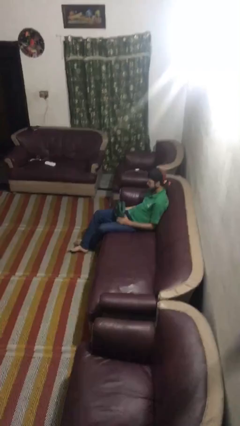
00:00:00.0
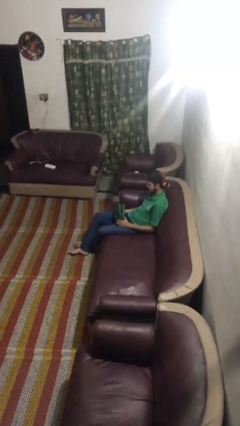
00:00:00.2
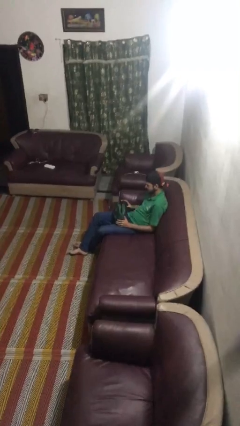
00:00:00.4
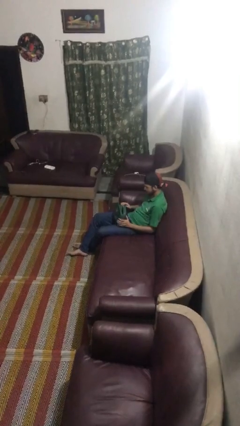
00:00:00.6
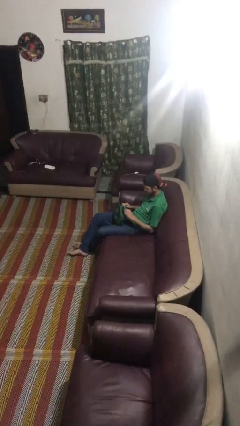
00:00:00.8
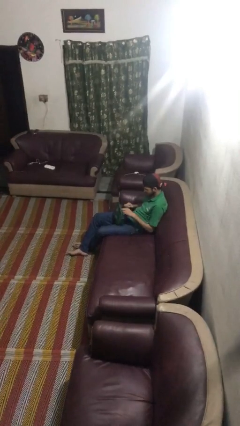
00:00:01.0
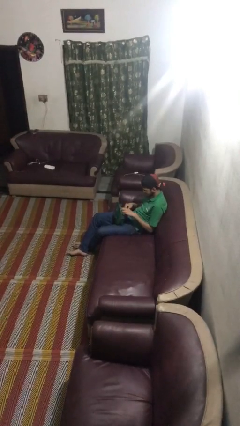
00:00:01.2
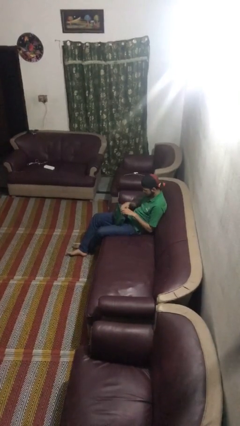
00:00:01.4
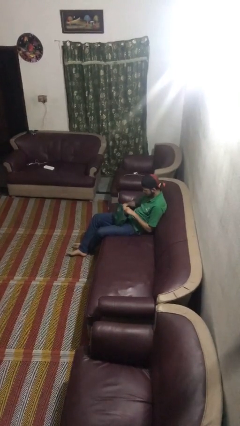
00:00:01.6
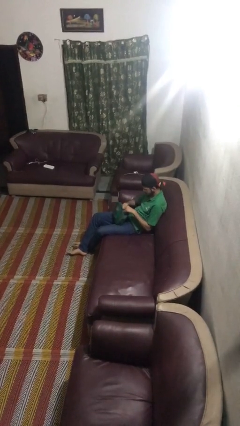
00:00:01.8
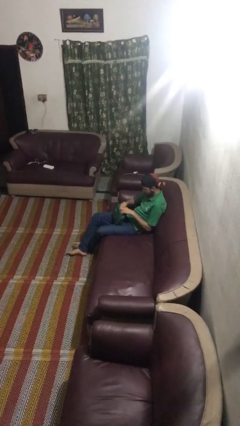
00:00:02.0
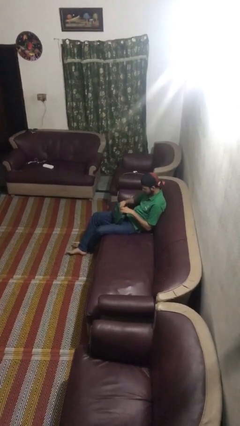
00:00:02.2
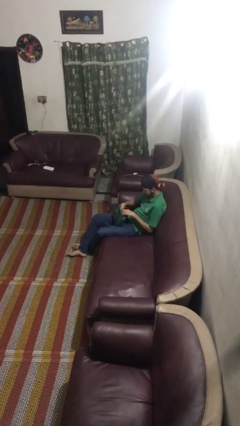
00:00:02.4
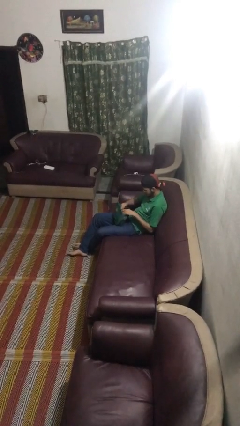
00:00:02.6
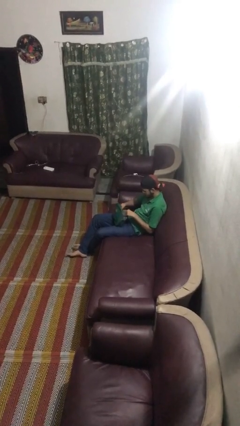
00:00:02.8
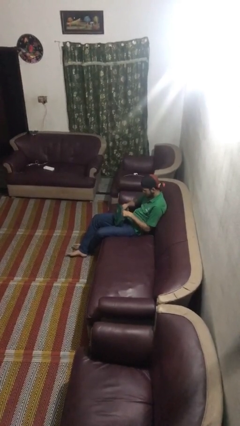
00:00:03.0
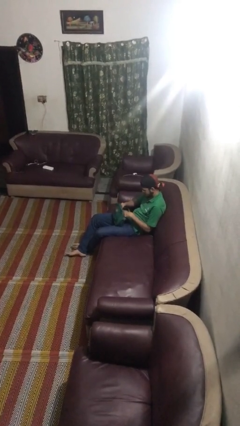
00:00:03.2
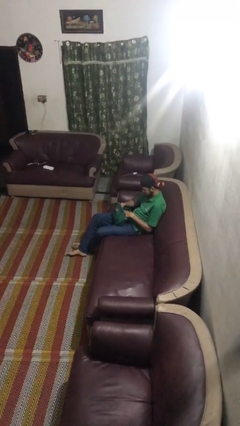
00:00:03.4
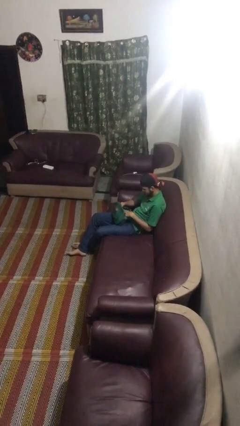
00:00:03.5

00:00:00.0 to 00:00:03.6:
person searches in purse

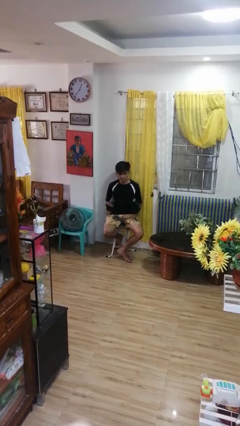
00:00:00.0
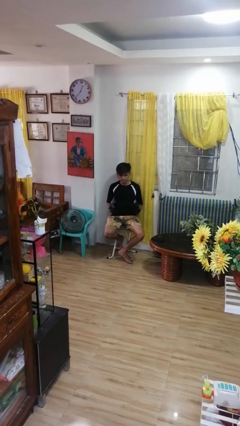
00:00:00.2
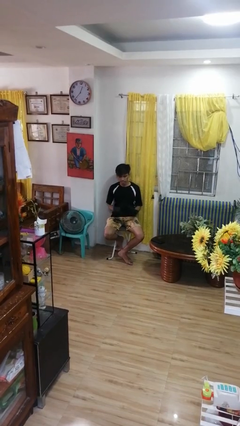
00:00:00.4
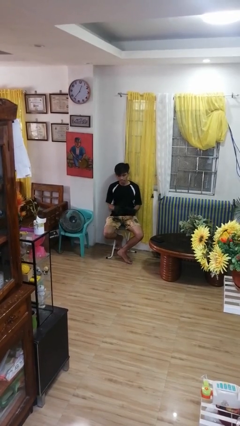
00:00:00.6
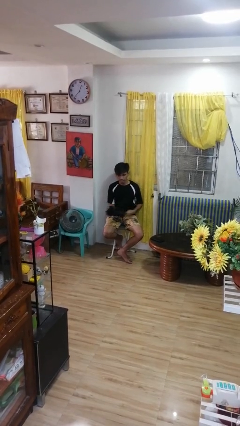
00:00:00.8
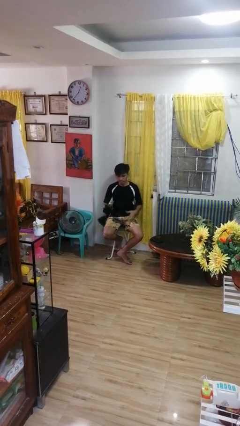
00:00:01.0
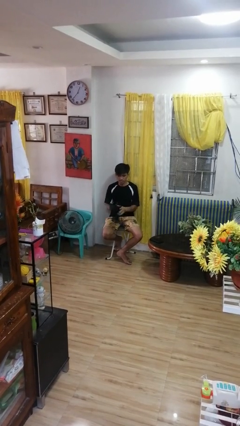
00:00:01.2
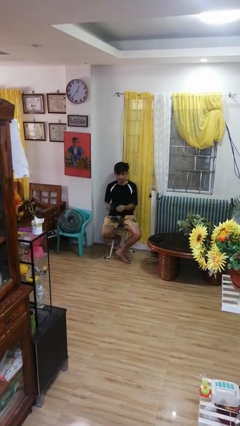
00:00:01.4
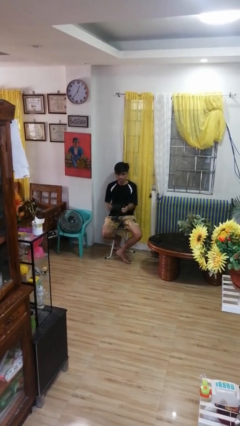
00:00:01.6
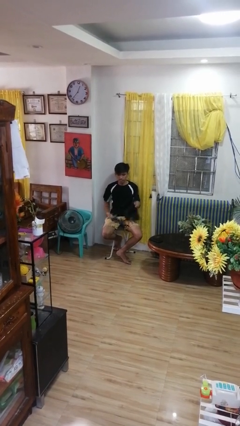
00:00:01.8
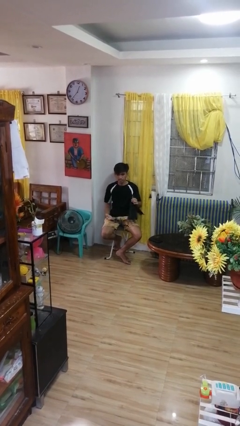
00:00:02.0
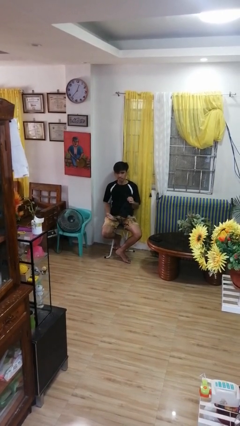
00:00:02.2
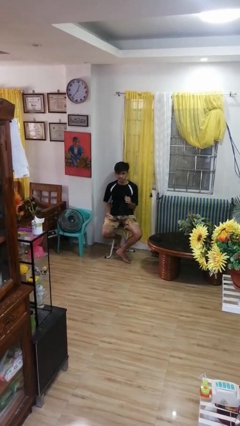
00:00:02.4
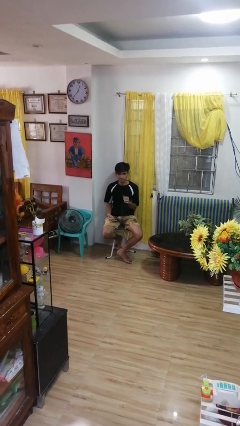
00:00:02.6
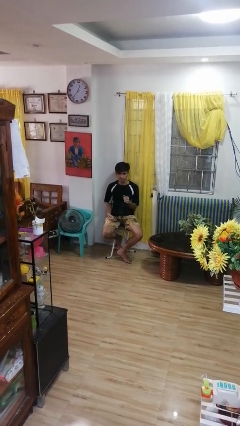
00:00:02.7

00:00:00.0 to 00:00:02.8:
person takes off gloves

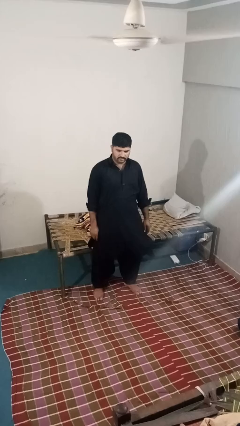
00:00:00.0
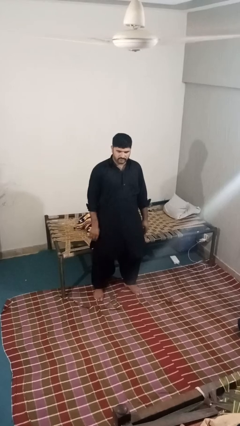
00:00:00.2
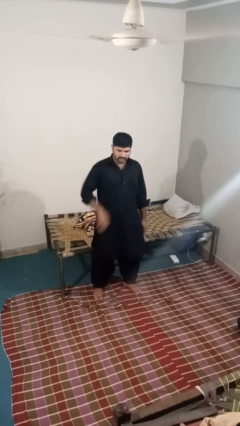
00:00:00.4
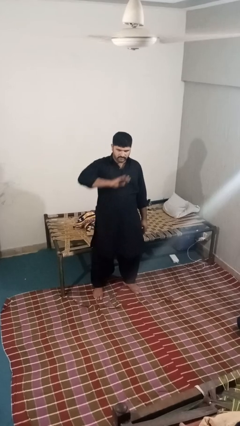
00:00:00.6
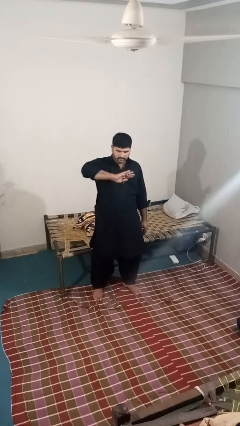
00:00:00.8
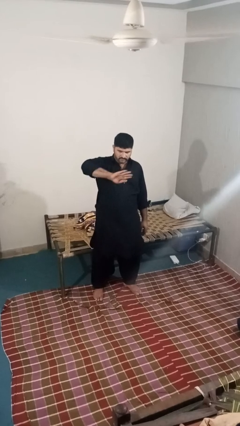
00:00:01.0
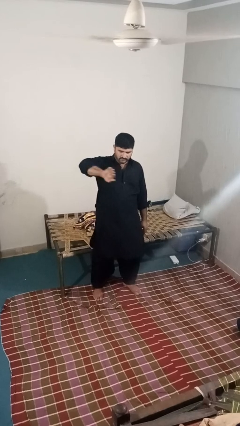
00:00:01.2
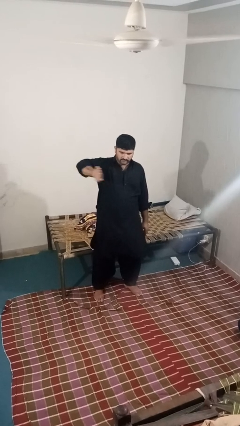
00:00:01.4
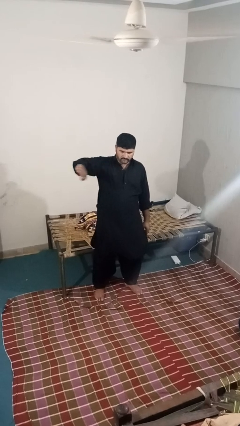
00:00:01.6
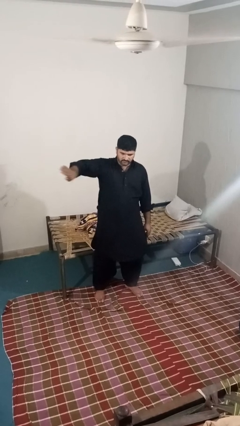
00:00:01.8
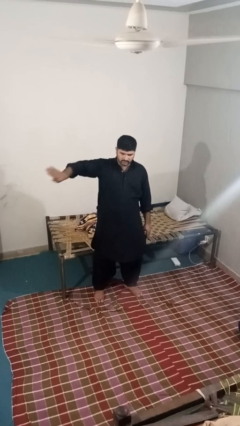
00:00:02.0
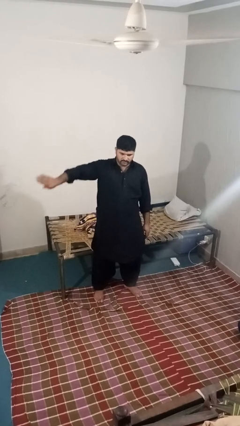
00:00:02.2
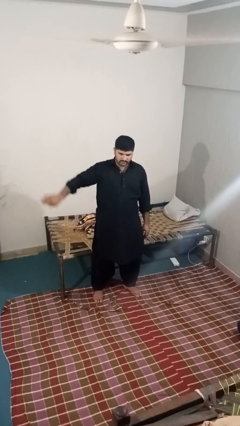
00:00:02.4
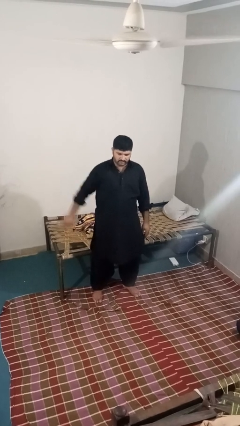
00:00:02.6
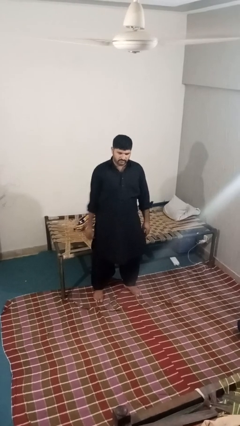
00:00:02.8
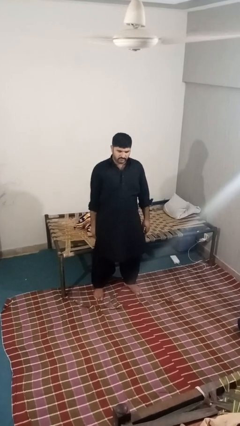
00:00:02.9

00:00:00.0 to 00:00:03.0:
person gestures swipe right

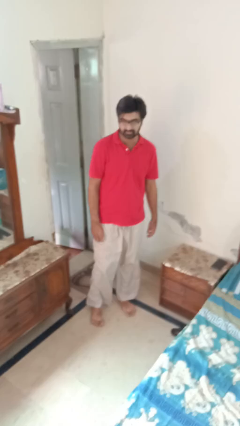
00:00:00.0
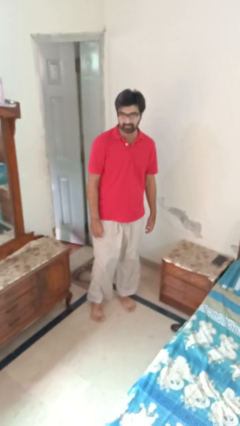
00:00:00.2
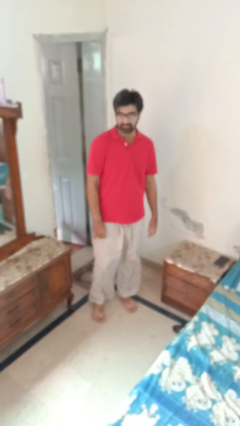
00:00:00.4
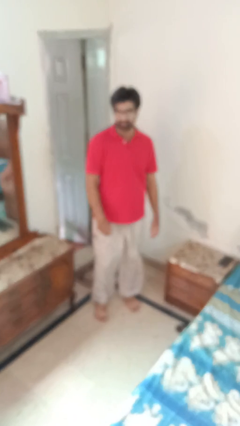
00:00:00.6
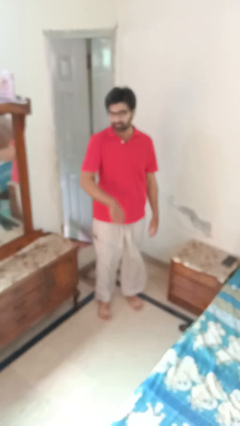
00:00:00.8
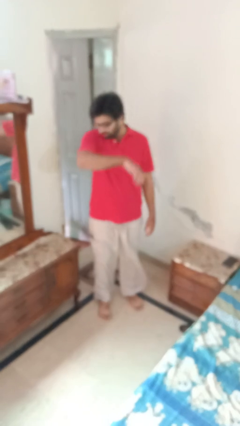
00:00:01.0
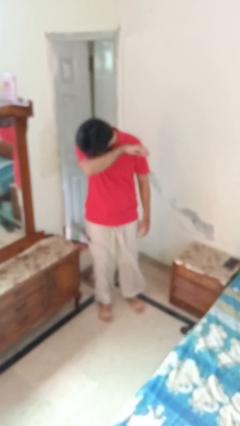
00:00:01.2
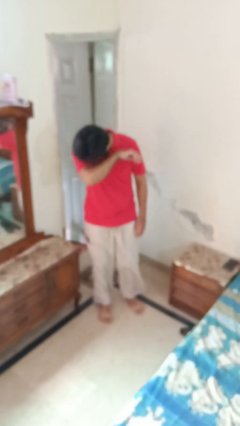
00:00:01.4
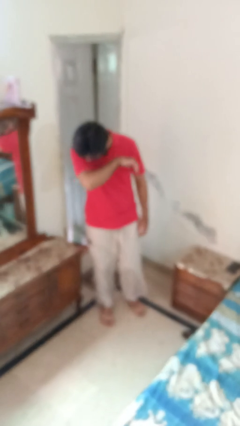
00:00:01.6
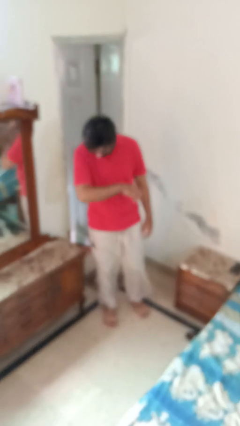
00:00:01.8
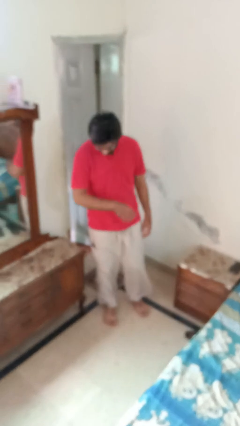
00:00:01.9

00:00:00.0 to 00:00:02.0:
person sneezes into arm

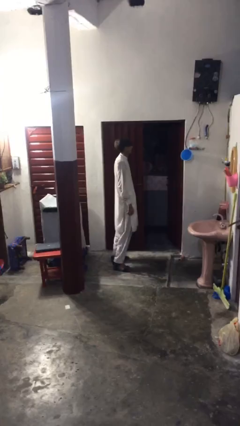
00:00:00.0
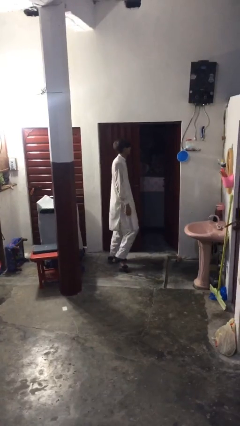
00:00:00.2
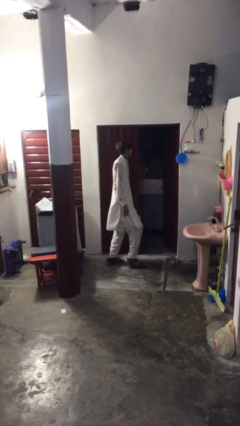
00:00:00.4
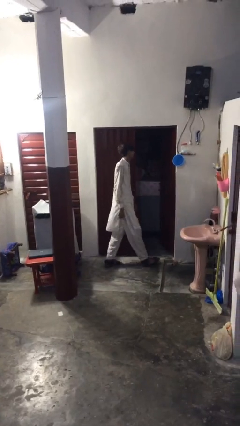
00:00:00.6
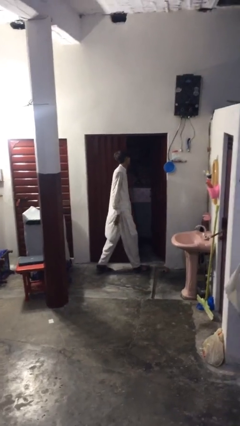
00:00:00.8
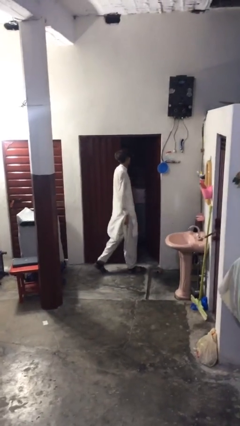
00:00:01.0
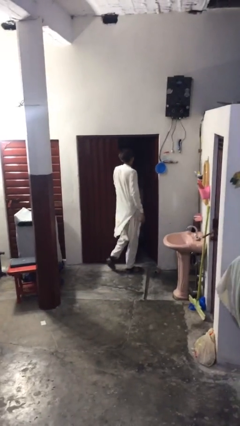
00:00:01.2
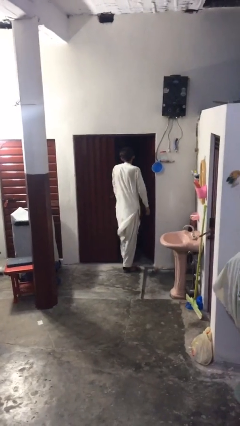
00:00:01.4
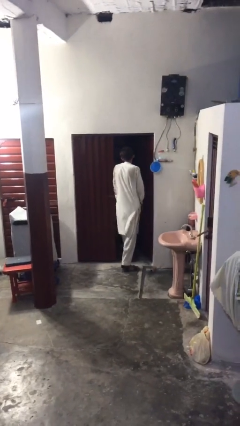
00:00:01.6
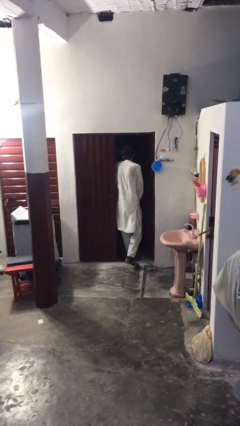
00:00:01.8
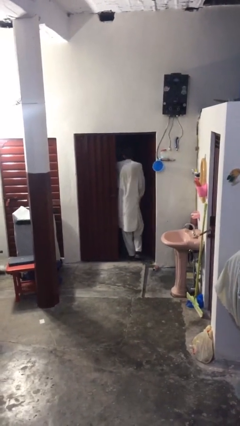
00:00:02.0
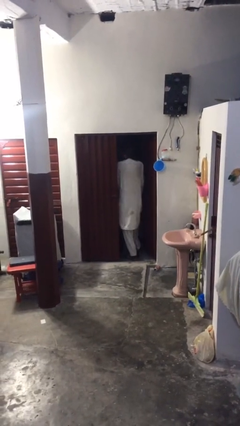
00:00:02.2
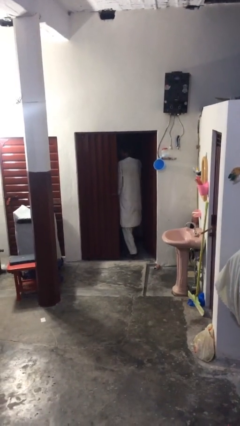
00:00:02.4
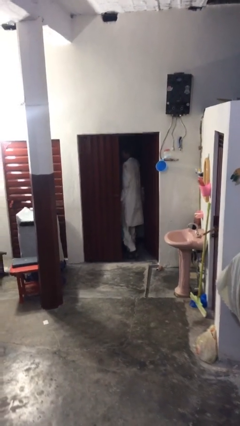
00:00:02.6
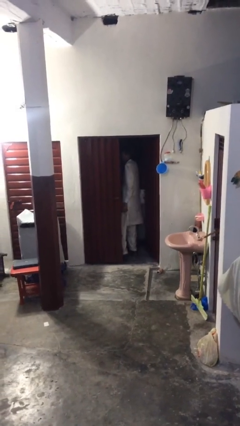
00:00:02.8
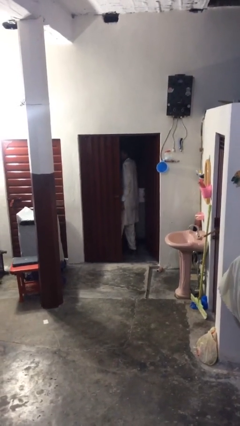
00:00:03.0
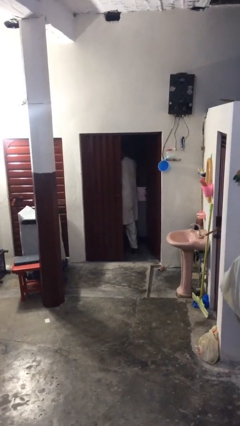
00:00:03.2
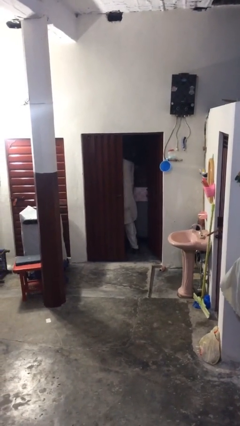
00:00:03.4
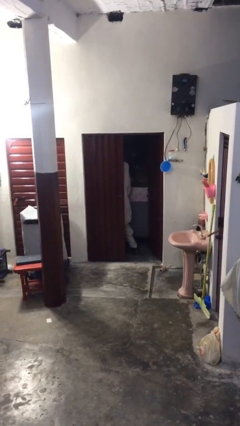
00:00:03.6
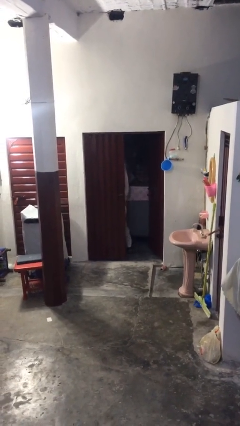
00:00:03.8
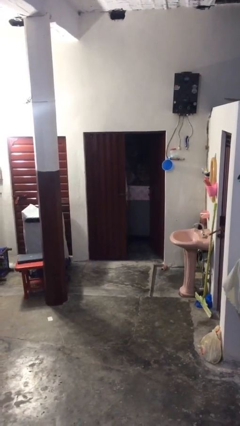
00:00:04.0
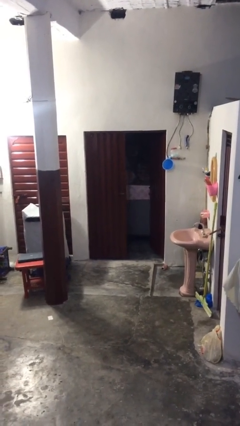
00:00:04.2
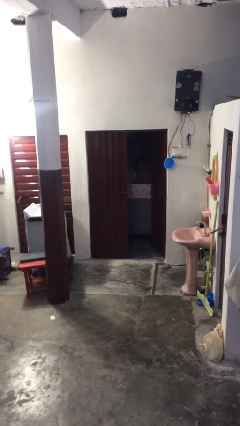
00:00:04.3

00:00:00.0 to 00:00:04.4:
person exits scene through structure

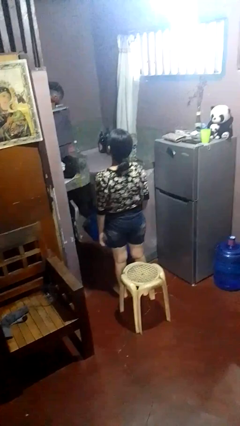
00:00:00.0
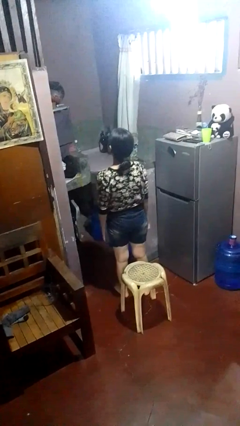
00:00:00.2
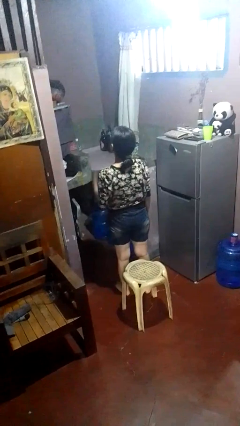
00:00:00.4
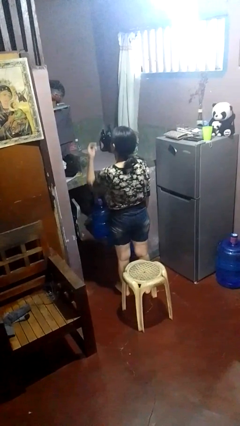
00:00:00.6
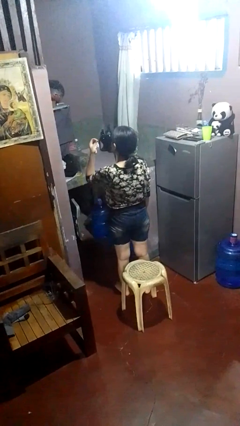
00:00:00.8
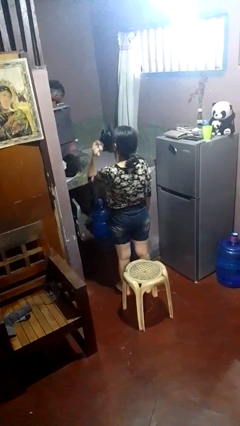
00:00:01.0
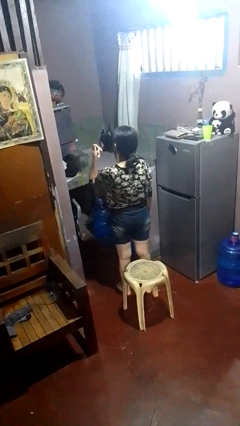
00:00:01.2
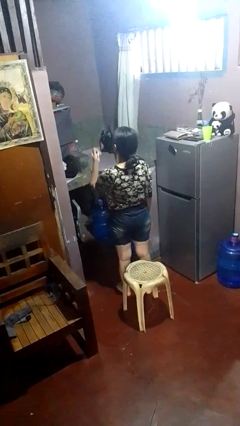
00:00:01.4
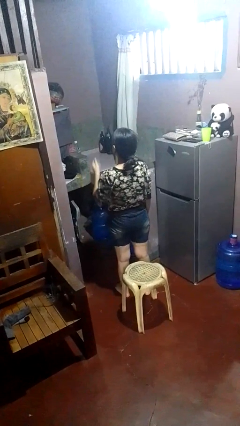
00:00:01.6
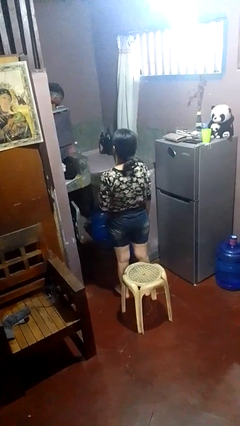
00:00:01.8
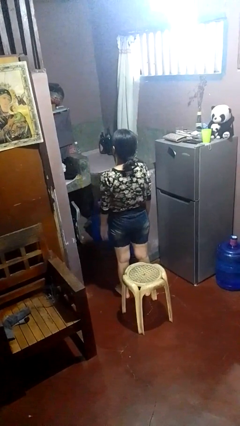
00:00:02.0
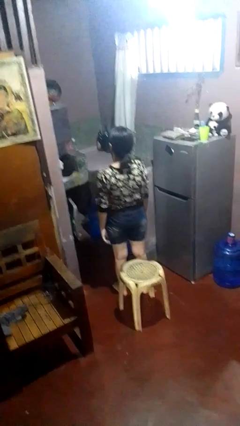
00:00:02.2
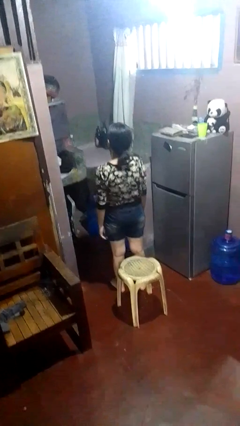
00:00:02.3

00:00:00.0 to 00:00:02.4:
person snaps fingers
